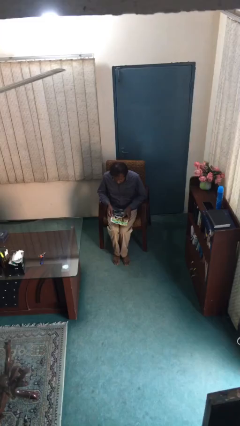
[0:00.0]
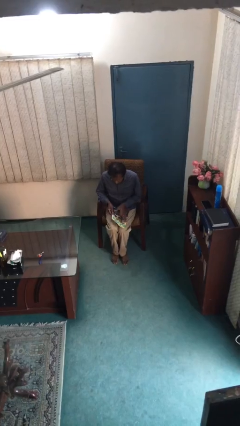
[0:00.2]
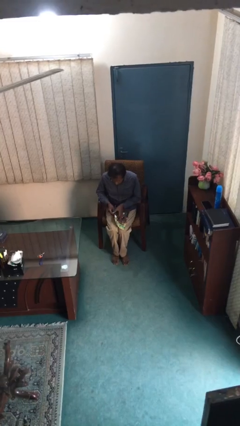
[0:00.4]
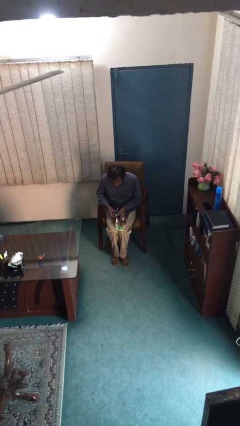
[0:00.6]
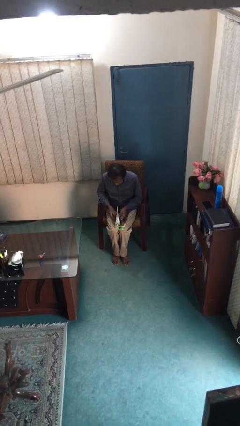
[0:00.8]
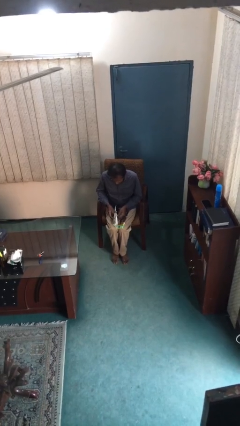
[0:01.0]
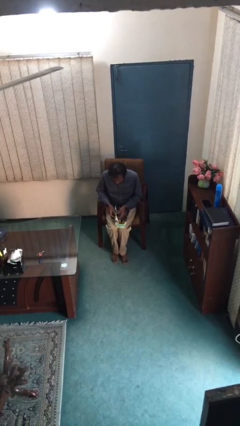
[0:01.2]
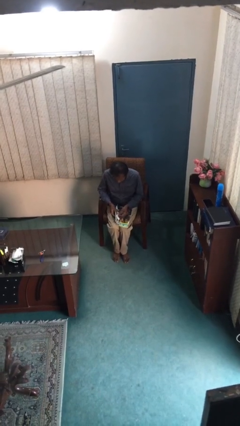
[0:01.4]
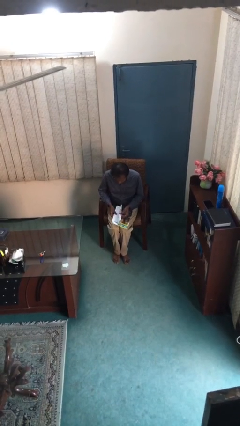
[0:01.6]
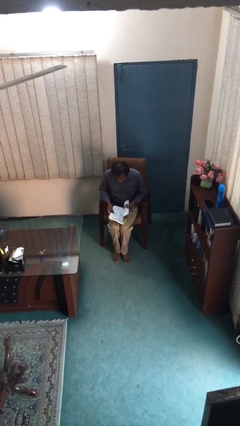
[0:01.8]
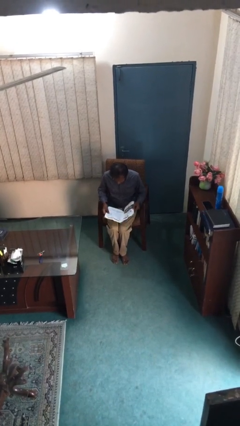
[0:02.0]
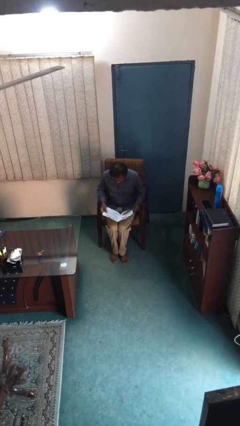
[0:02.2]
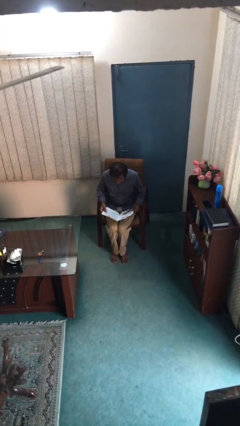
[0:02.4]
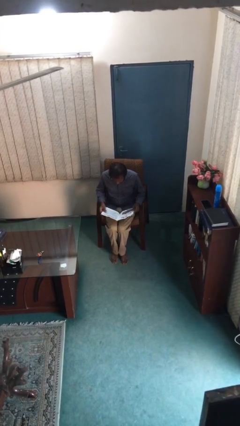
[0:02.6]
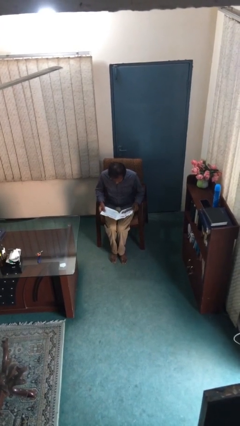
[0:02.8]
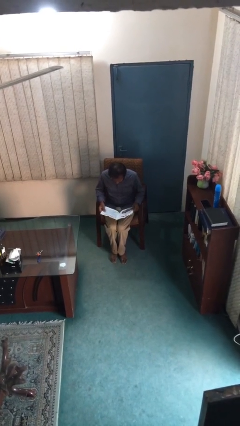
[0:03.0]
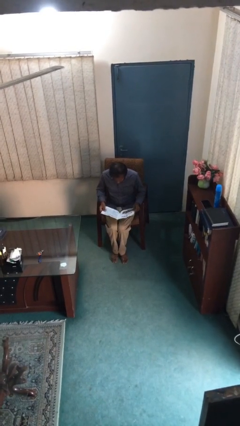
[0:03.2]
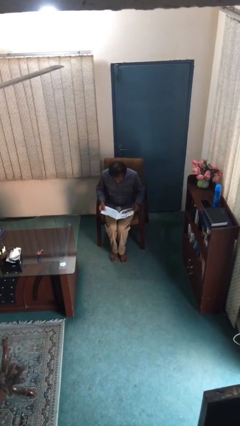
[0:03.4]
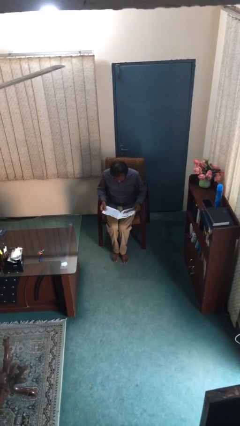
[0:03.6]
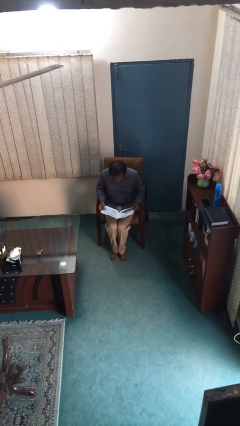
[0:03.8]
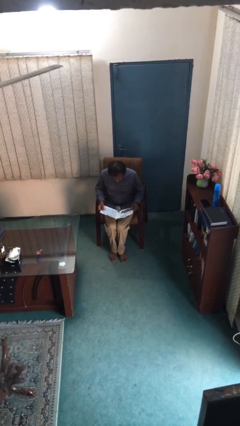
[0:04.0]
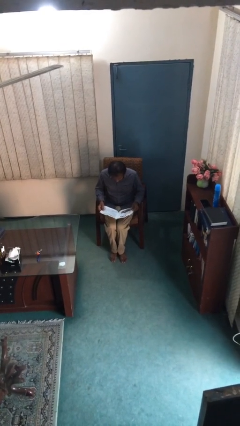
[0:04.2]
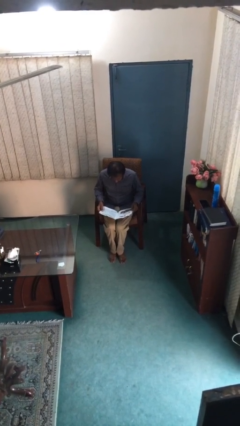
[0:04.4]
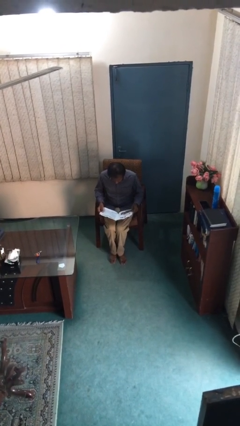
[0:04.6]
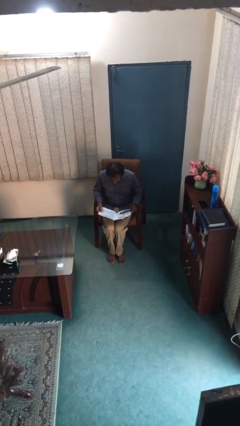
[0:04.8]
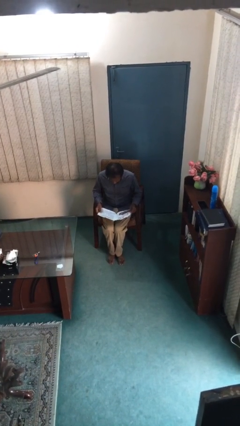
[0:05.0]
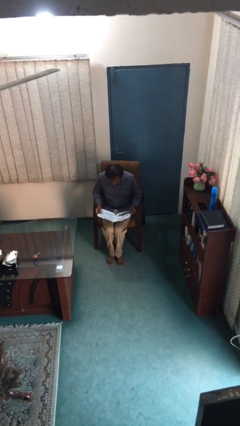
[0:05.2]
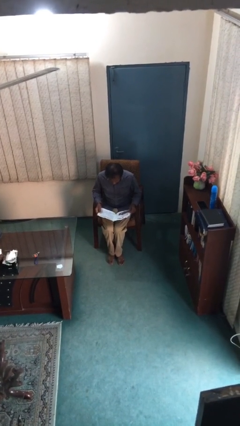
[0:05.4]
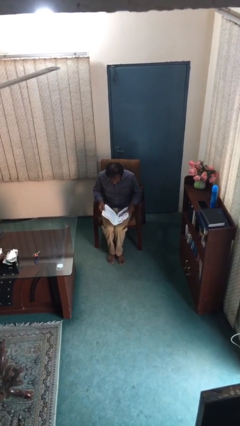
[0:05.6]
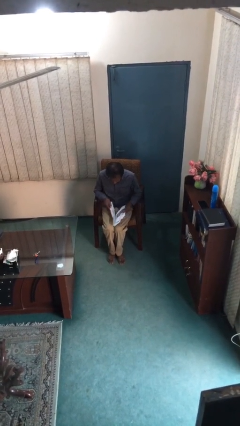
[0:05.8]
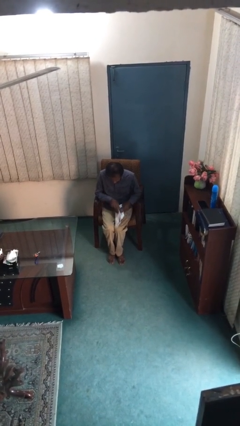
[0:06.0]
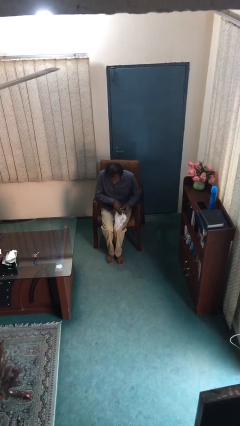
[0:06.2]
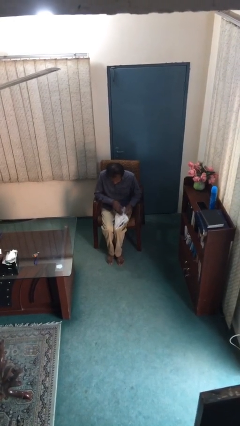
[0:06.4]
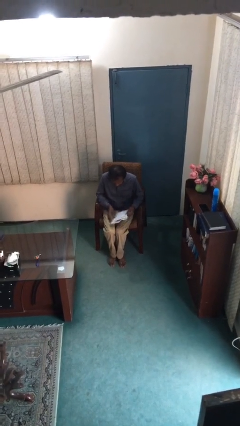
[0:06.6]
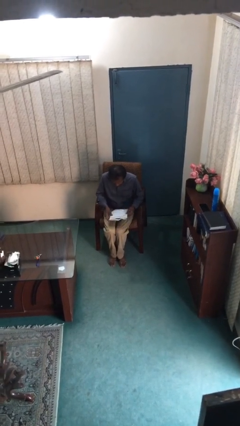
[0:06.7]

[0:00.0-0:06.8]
person reads document

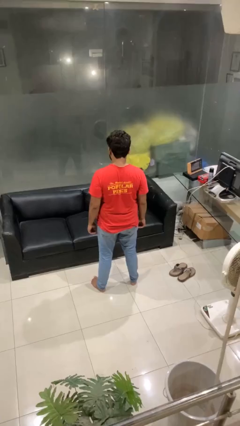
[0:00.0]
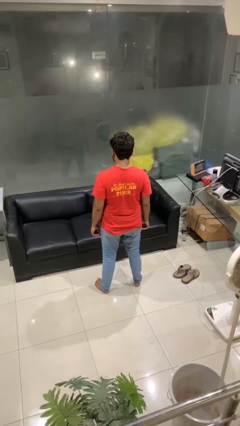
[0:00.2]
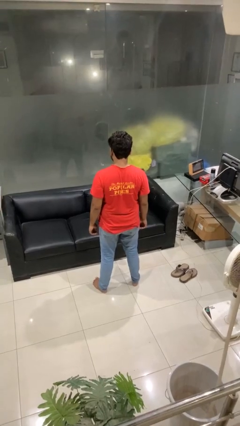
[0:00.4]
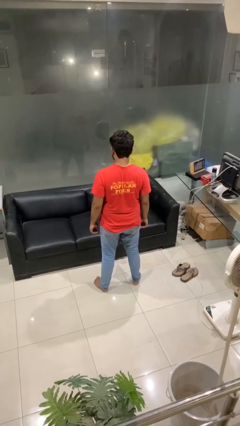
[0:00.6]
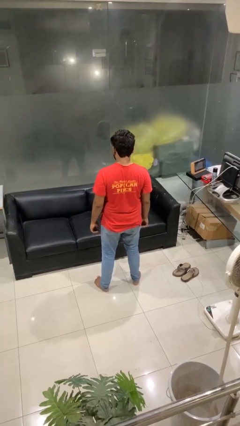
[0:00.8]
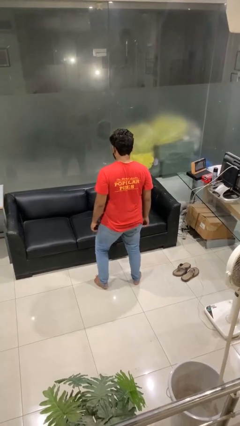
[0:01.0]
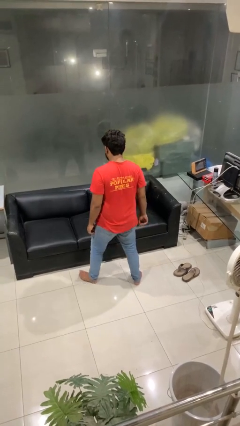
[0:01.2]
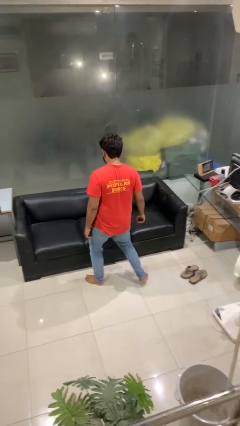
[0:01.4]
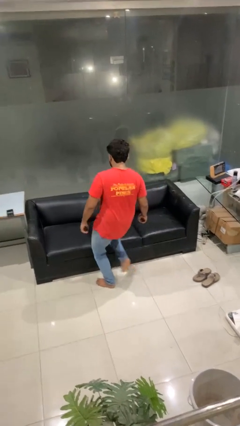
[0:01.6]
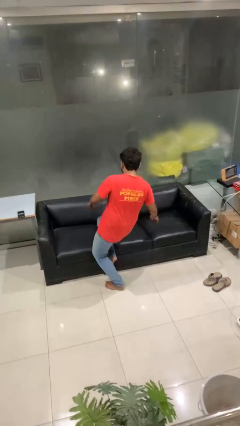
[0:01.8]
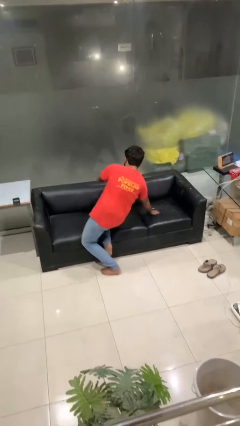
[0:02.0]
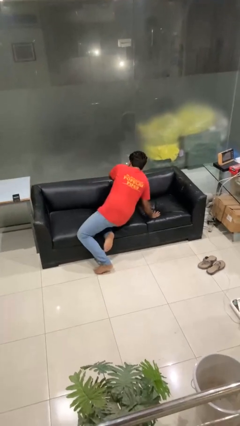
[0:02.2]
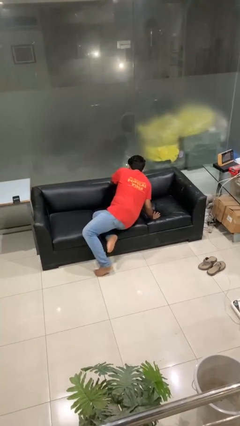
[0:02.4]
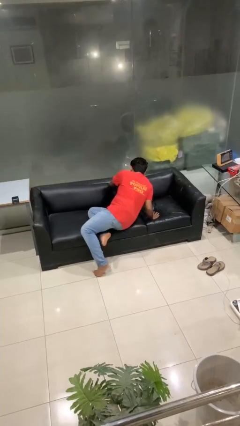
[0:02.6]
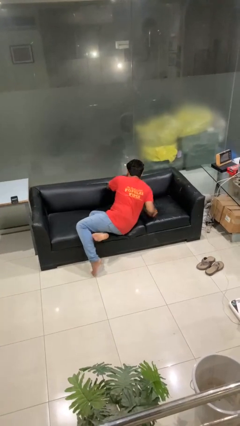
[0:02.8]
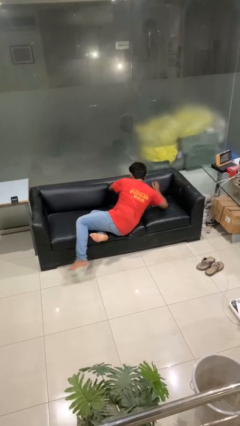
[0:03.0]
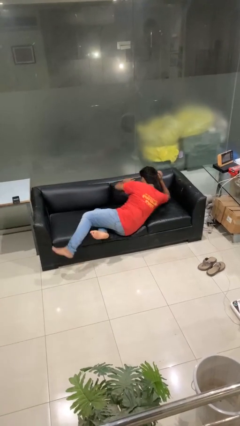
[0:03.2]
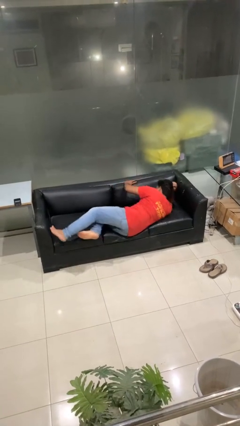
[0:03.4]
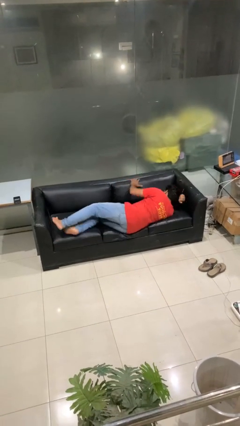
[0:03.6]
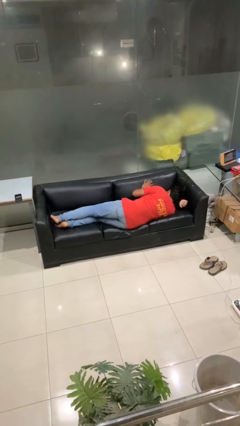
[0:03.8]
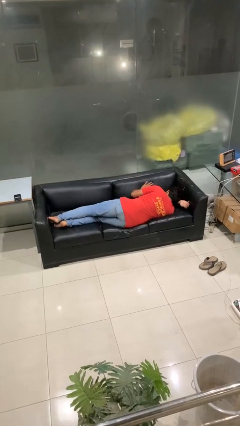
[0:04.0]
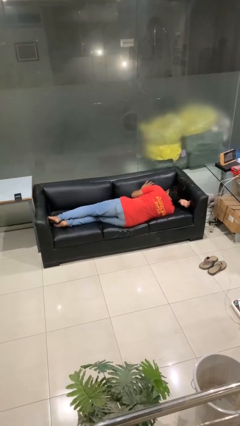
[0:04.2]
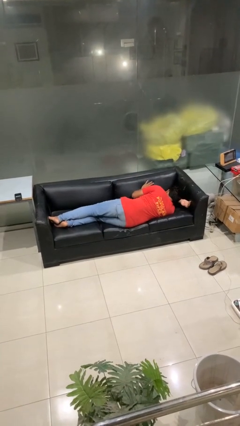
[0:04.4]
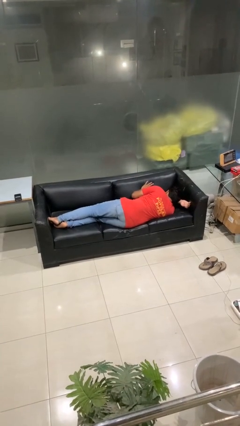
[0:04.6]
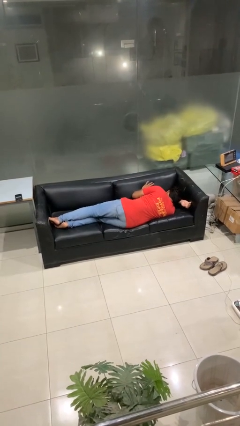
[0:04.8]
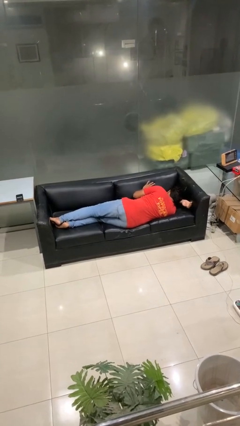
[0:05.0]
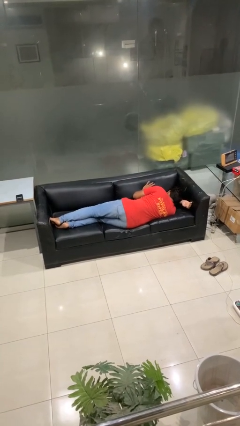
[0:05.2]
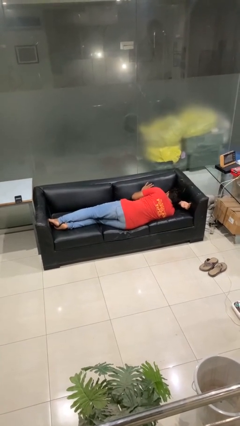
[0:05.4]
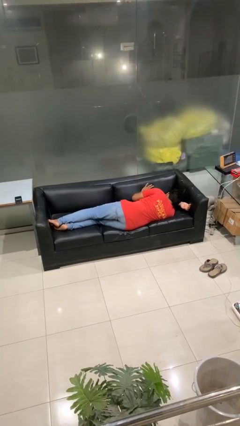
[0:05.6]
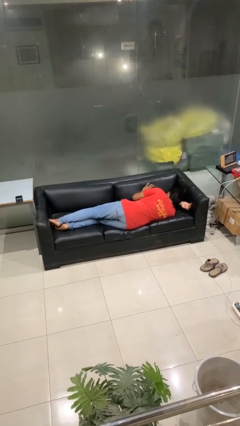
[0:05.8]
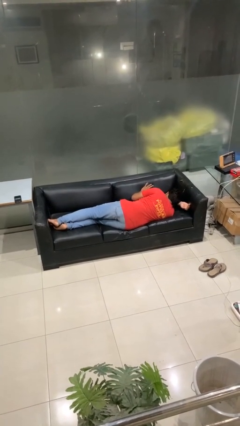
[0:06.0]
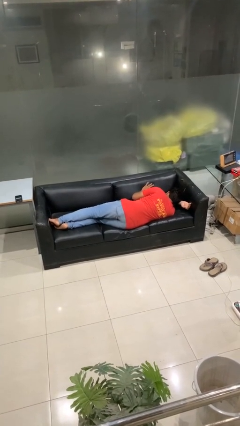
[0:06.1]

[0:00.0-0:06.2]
person lies down on couch

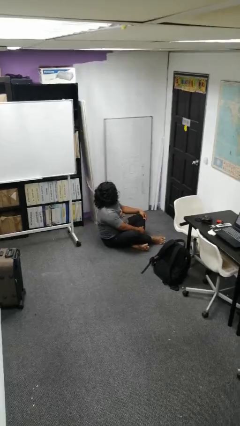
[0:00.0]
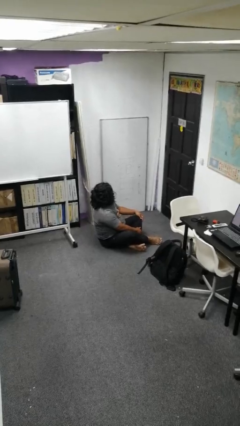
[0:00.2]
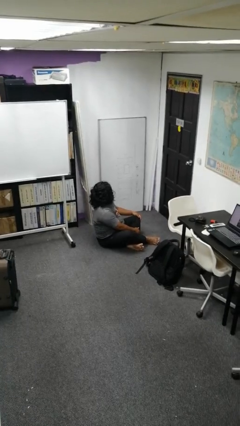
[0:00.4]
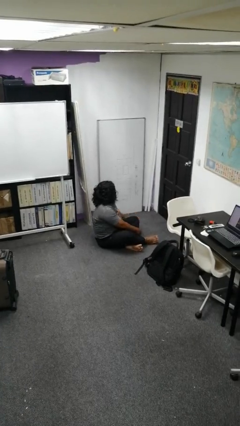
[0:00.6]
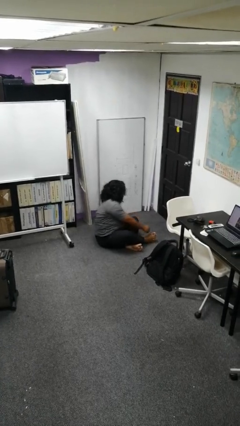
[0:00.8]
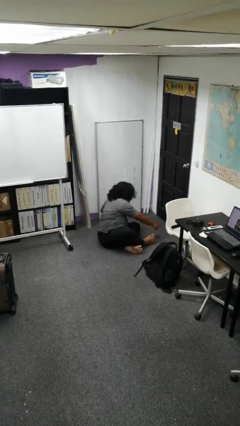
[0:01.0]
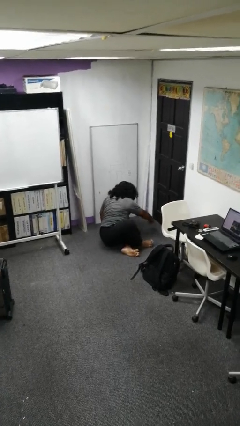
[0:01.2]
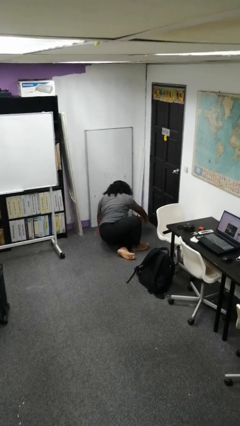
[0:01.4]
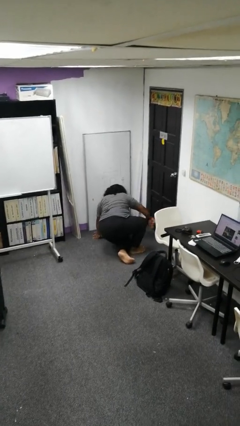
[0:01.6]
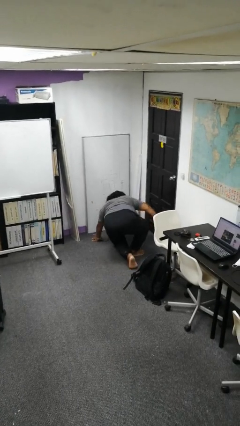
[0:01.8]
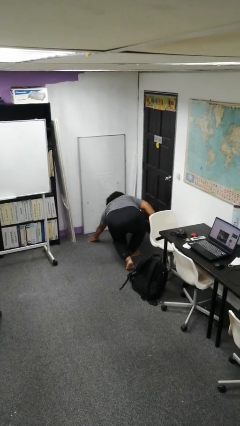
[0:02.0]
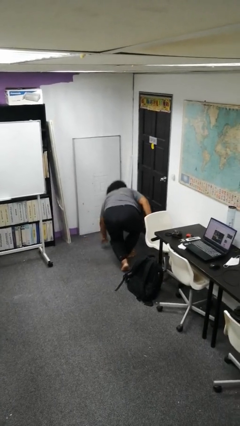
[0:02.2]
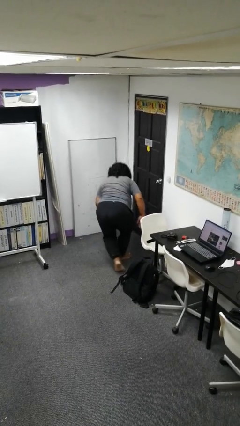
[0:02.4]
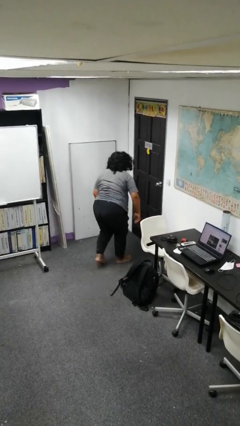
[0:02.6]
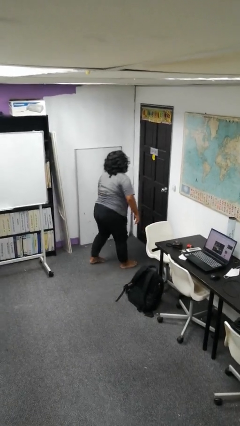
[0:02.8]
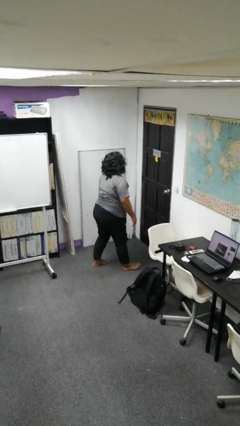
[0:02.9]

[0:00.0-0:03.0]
person stands up from floor

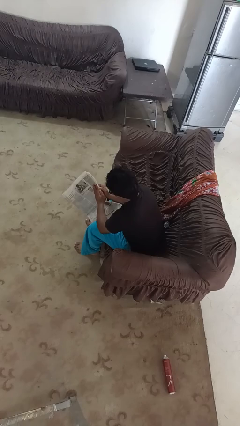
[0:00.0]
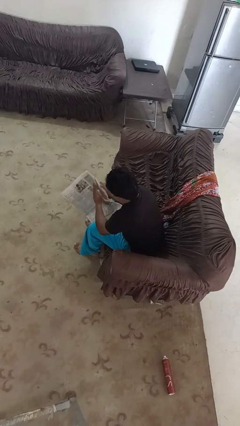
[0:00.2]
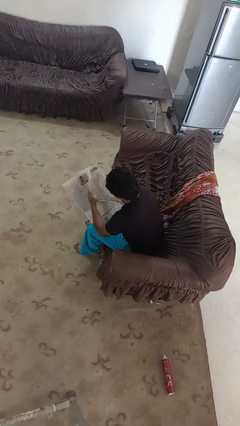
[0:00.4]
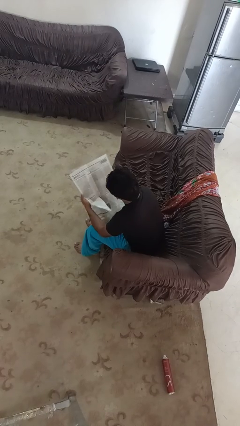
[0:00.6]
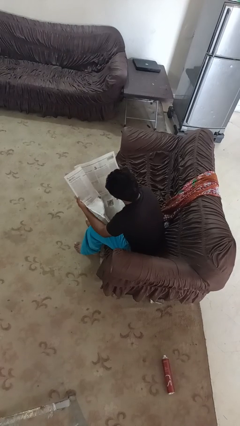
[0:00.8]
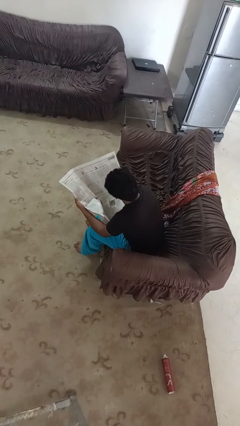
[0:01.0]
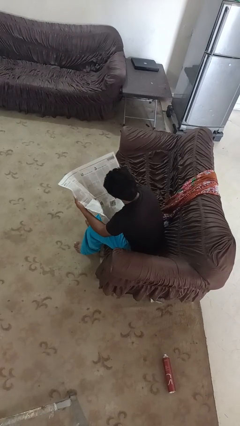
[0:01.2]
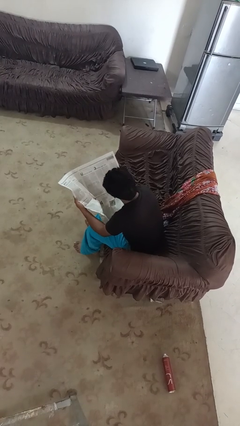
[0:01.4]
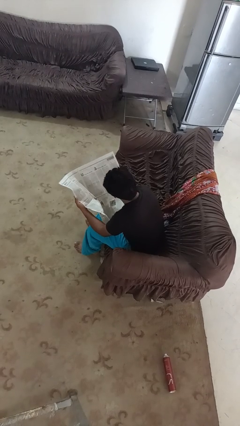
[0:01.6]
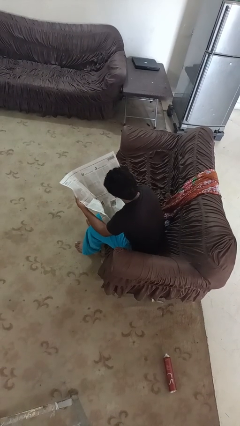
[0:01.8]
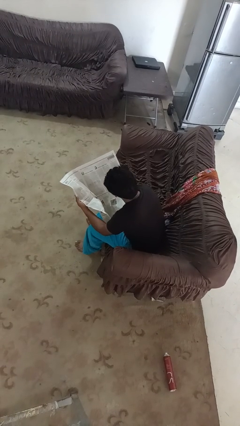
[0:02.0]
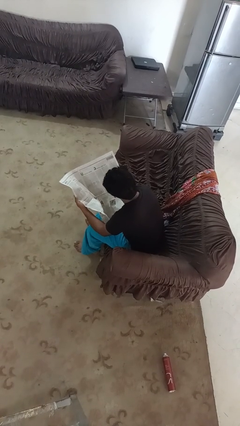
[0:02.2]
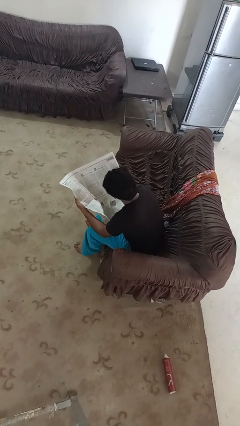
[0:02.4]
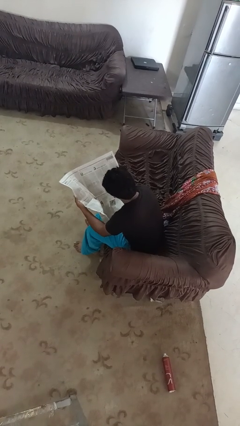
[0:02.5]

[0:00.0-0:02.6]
person reads newspaper
